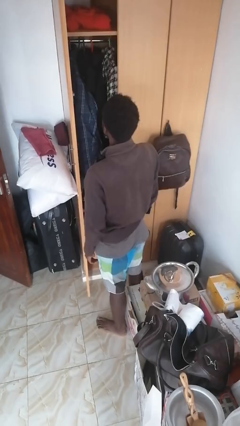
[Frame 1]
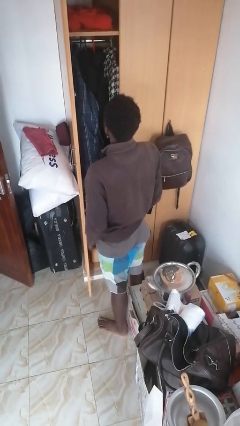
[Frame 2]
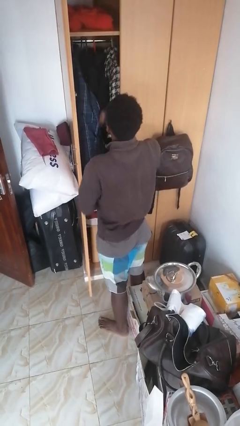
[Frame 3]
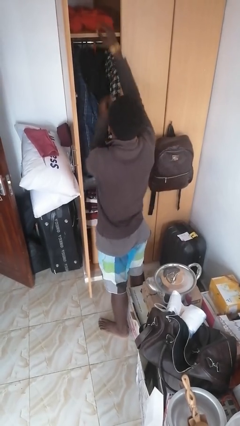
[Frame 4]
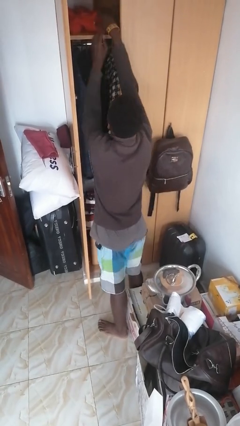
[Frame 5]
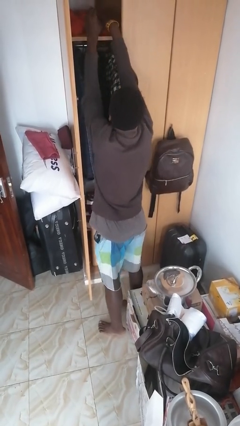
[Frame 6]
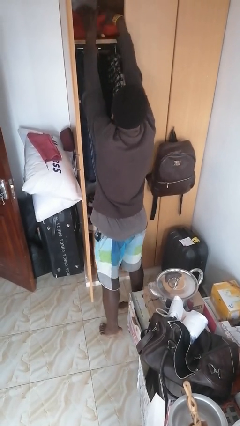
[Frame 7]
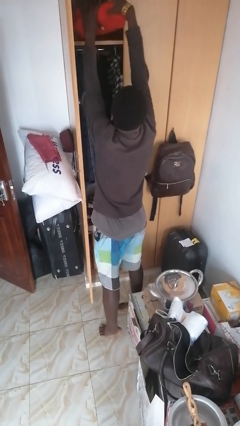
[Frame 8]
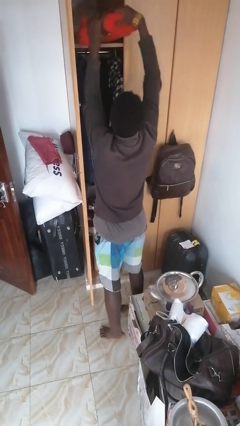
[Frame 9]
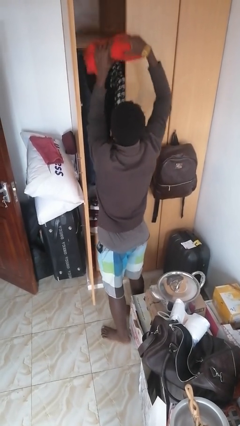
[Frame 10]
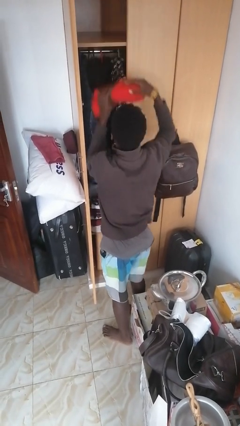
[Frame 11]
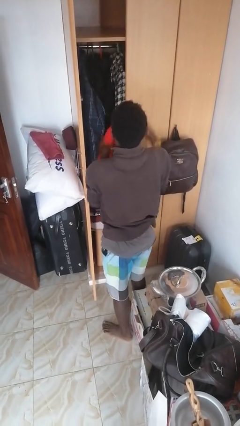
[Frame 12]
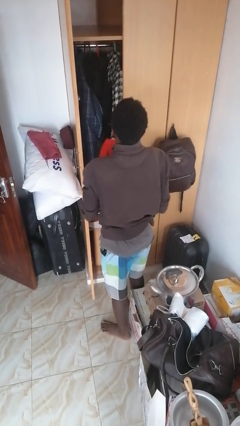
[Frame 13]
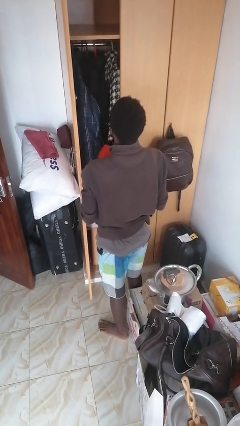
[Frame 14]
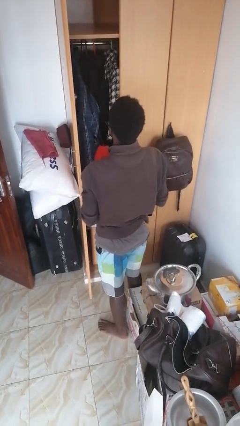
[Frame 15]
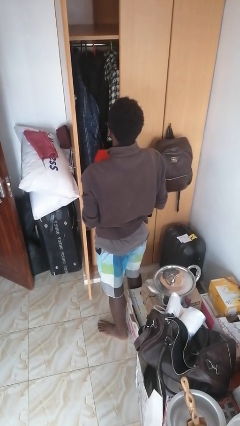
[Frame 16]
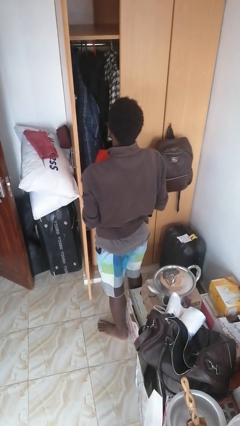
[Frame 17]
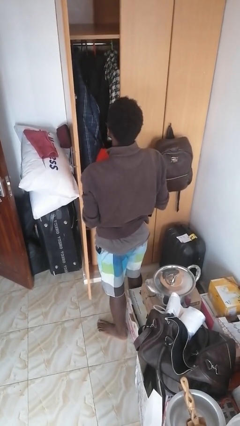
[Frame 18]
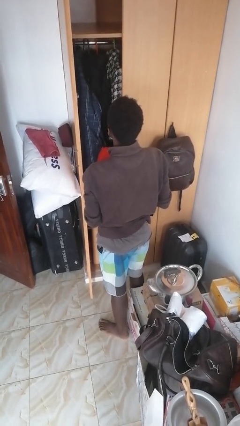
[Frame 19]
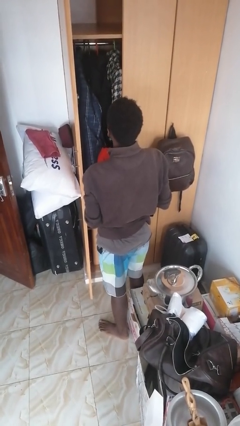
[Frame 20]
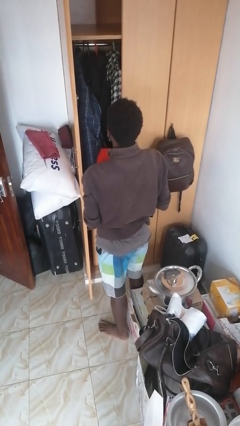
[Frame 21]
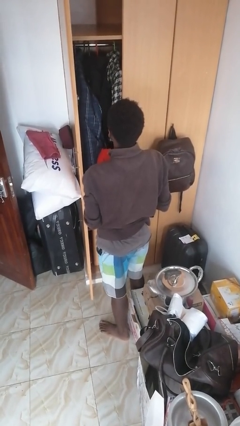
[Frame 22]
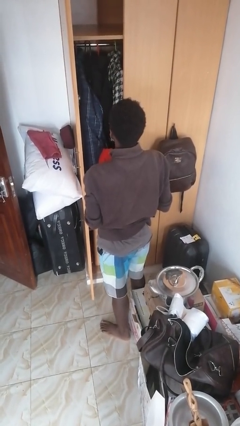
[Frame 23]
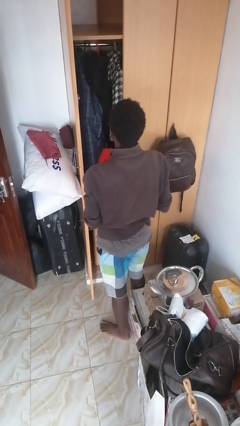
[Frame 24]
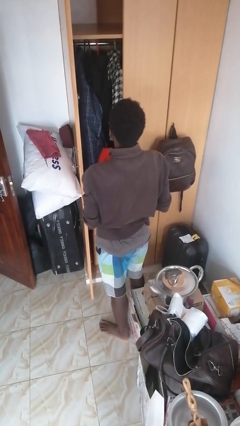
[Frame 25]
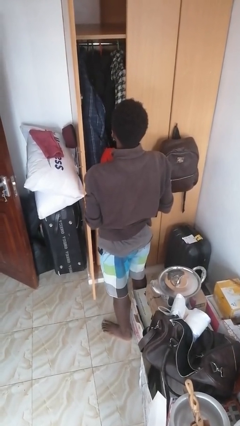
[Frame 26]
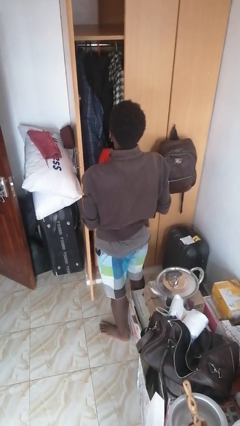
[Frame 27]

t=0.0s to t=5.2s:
person picks up object from shelf

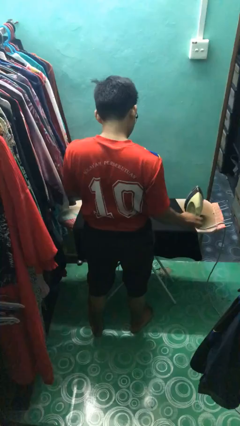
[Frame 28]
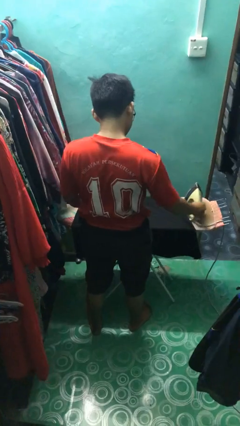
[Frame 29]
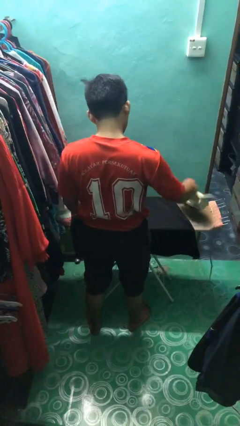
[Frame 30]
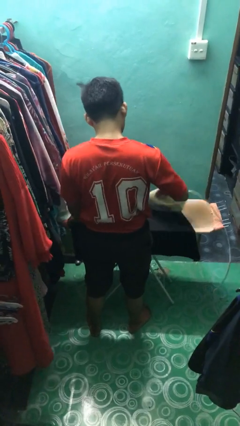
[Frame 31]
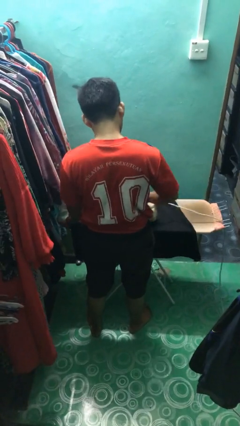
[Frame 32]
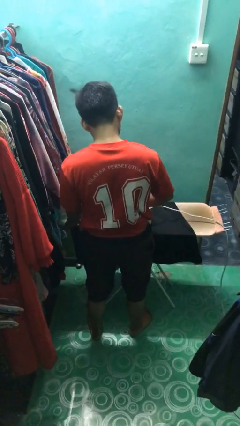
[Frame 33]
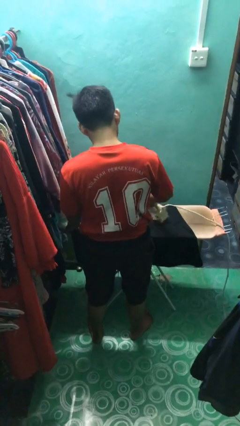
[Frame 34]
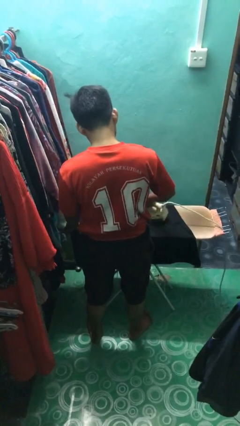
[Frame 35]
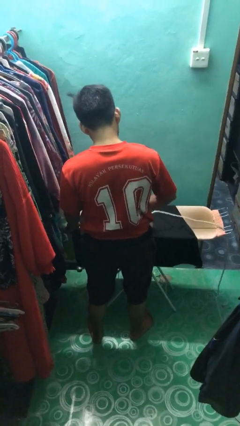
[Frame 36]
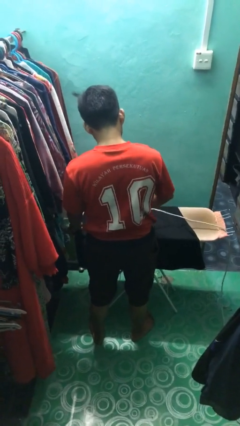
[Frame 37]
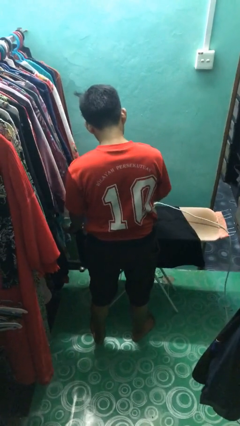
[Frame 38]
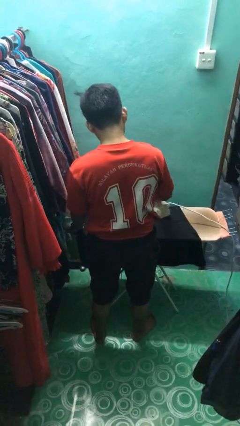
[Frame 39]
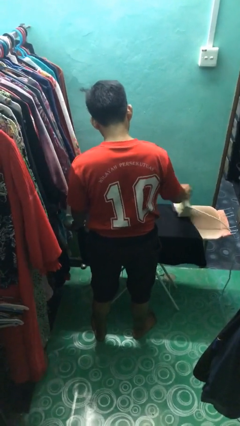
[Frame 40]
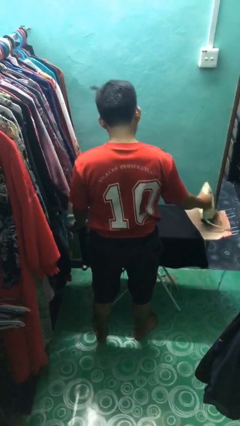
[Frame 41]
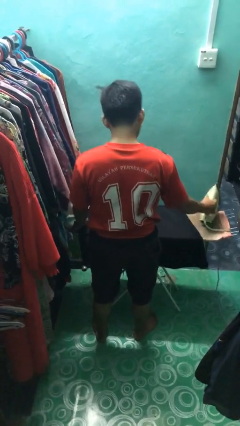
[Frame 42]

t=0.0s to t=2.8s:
person irons clothes

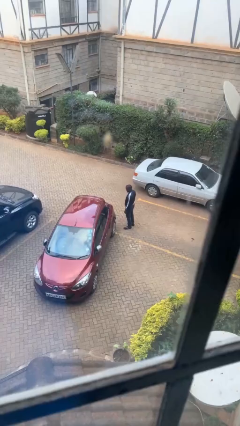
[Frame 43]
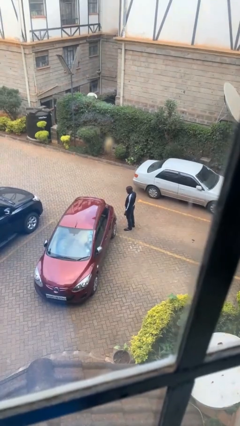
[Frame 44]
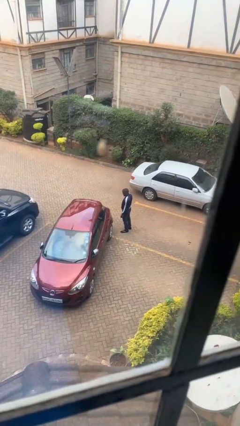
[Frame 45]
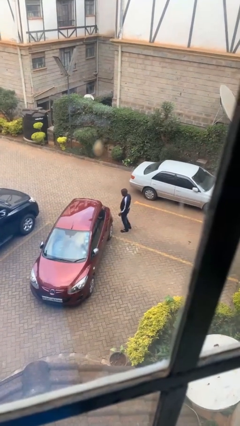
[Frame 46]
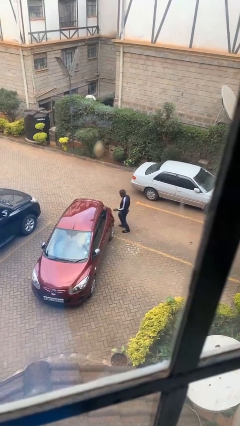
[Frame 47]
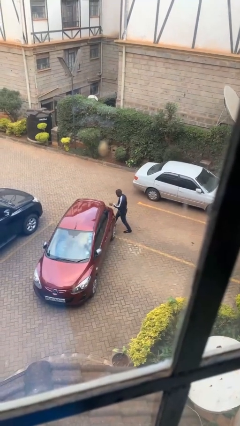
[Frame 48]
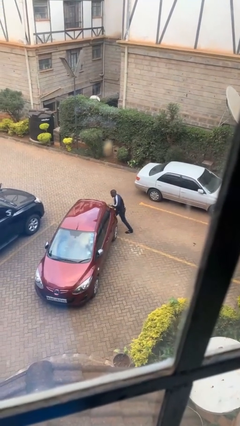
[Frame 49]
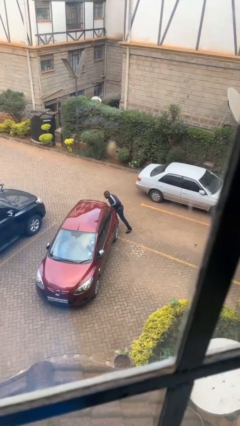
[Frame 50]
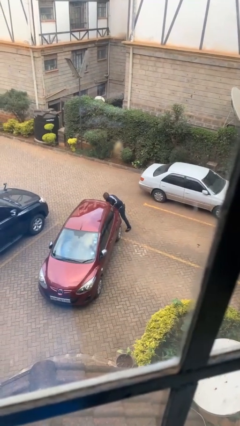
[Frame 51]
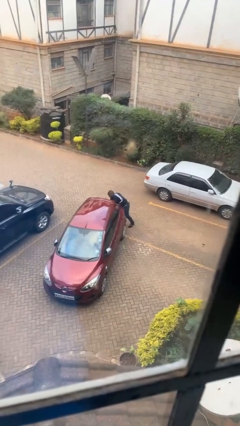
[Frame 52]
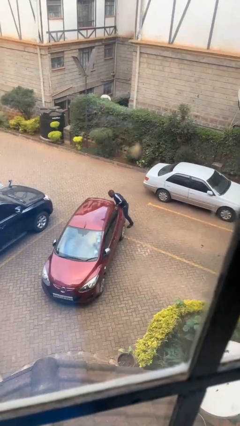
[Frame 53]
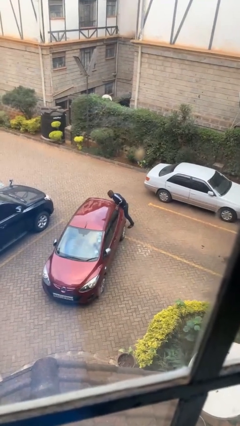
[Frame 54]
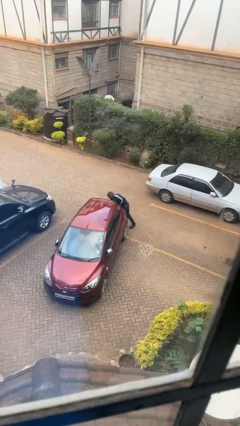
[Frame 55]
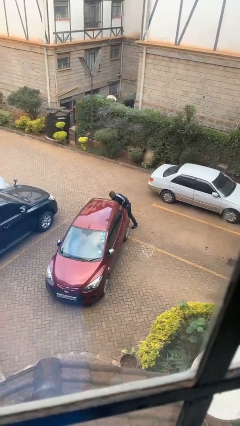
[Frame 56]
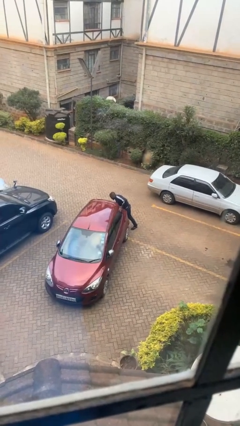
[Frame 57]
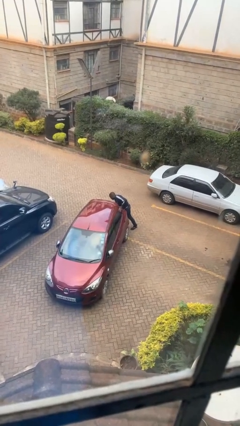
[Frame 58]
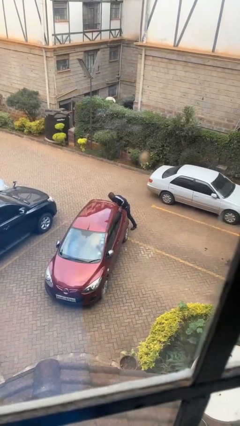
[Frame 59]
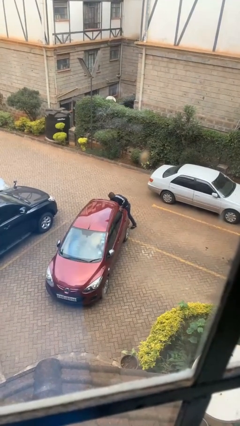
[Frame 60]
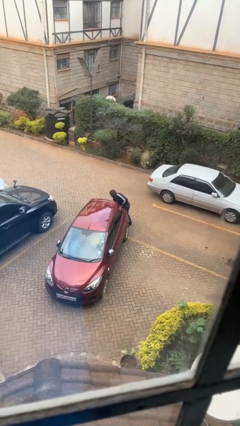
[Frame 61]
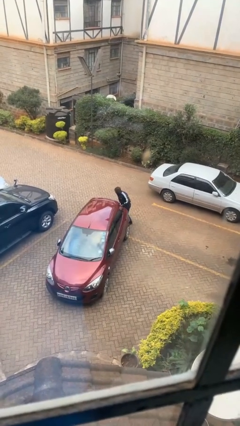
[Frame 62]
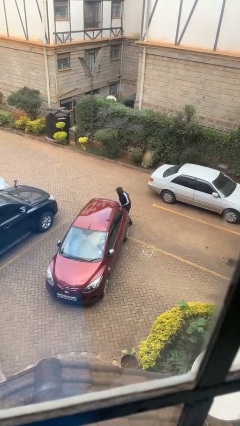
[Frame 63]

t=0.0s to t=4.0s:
person polishes car with rag

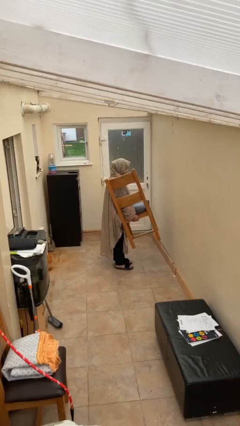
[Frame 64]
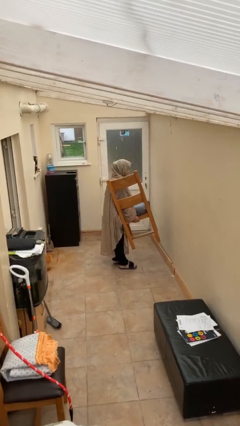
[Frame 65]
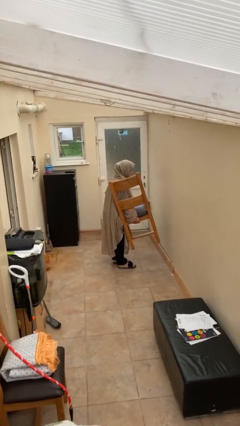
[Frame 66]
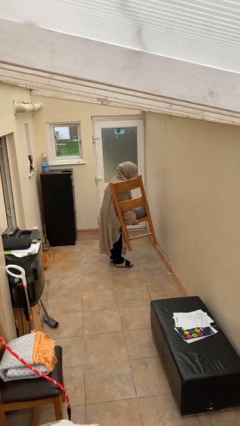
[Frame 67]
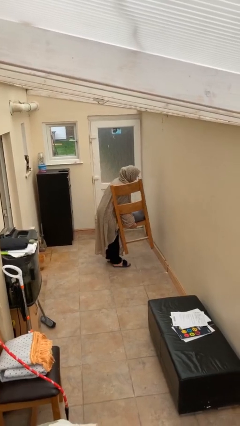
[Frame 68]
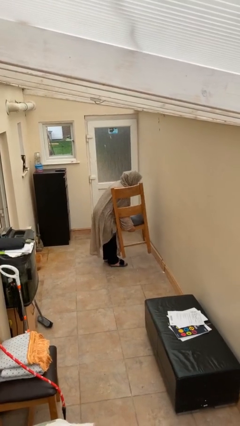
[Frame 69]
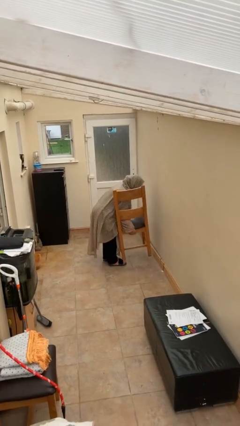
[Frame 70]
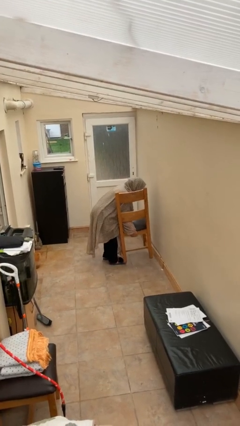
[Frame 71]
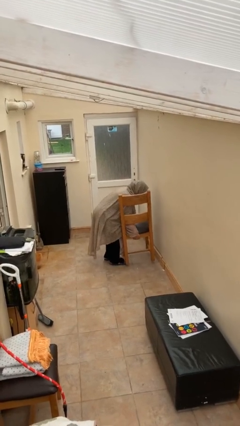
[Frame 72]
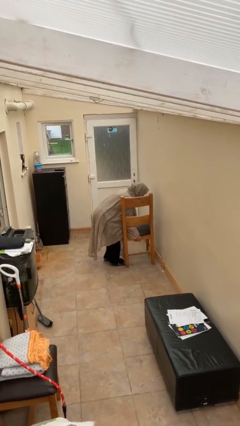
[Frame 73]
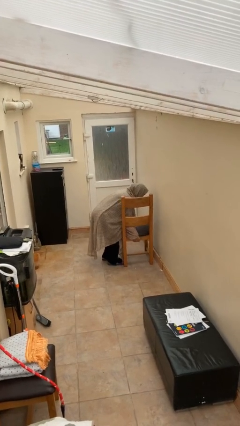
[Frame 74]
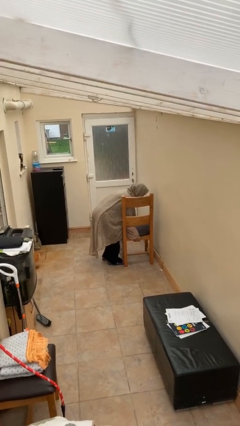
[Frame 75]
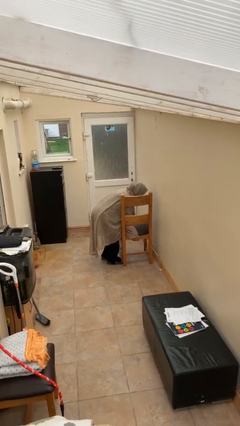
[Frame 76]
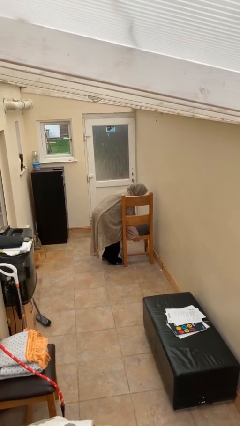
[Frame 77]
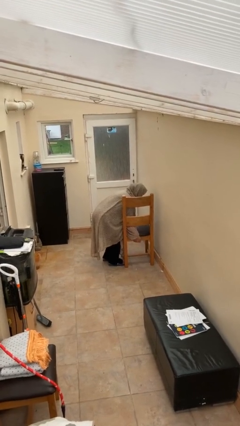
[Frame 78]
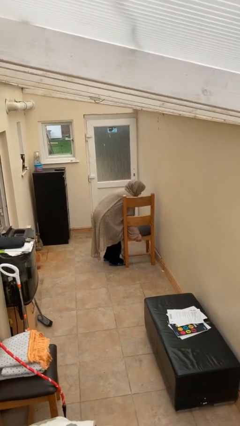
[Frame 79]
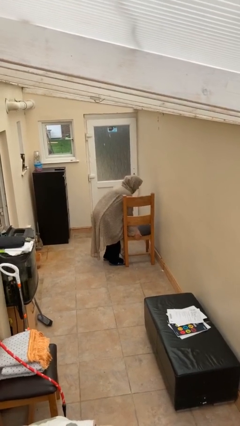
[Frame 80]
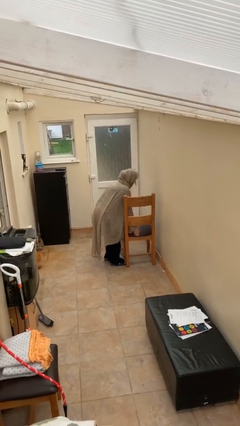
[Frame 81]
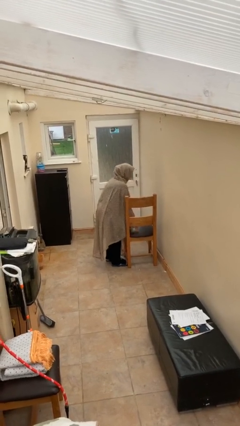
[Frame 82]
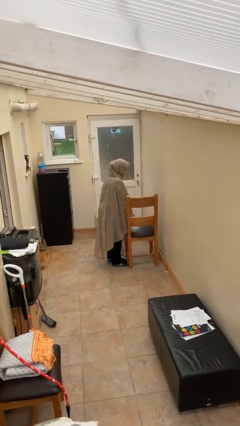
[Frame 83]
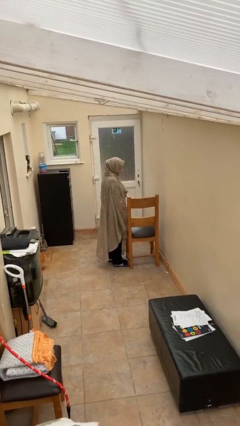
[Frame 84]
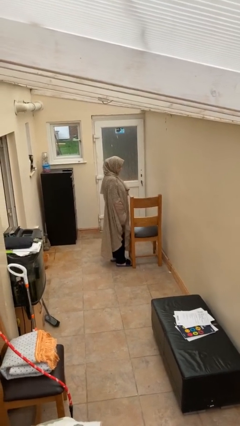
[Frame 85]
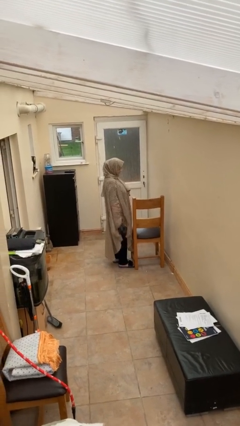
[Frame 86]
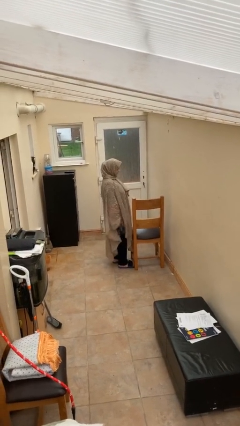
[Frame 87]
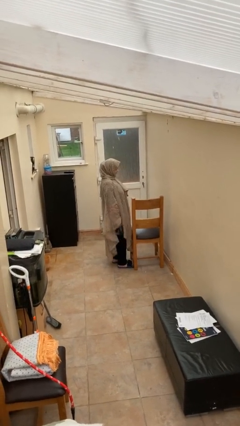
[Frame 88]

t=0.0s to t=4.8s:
person puts down object on floor

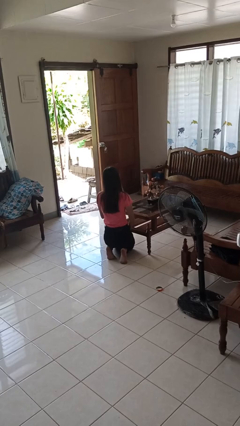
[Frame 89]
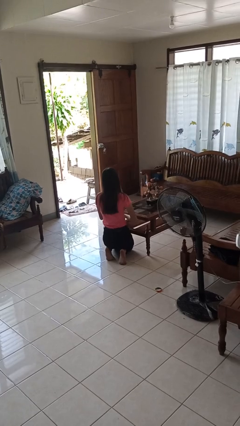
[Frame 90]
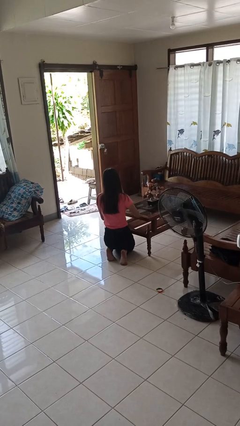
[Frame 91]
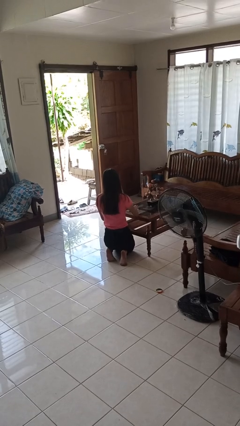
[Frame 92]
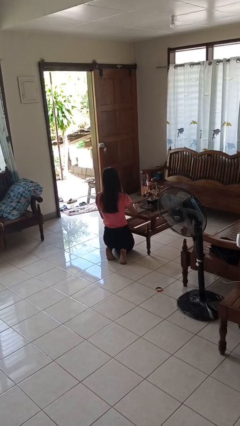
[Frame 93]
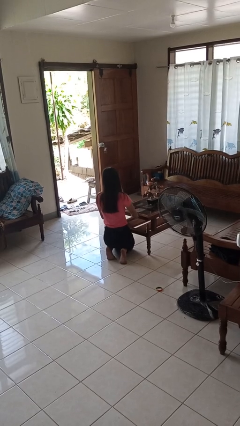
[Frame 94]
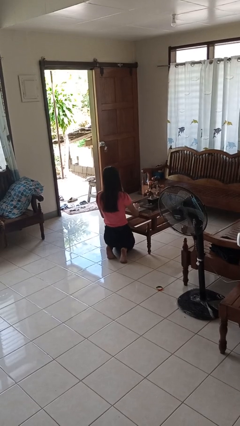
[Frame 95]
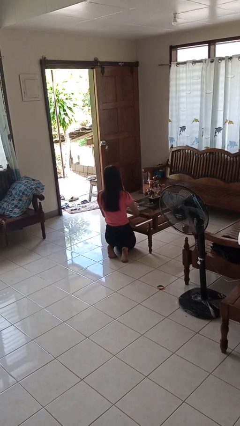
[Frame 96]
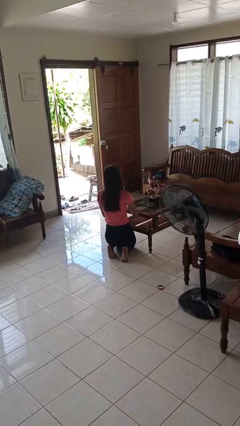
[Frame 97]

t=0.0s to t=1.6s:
person cleans table with rag
